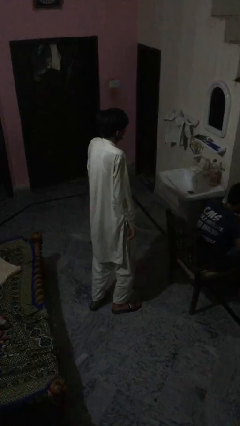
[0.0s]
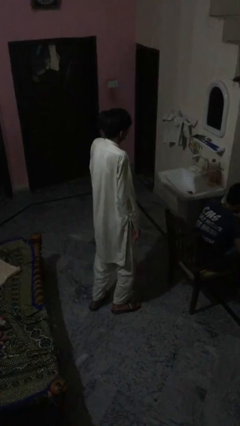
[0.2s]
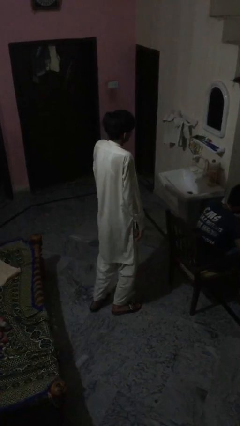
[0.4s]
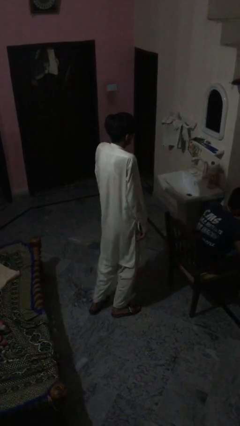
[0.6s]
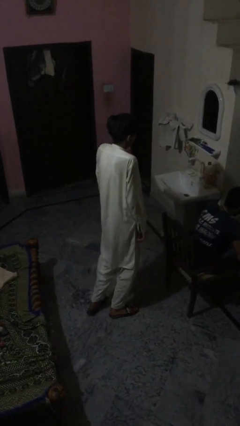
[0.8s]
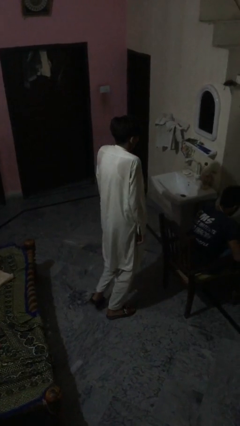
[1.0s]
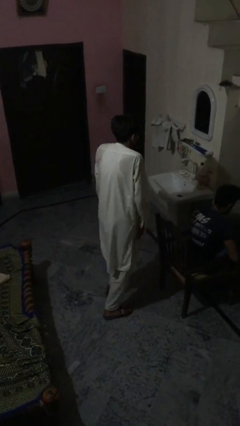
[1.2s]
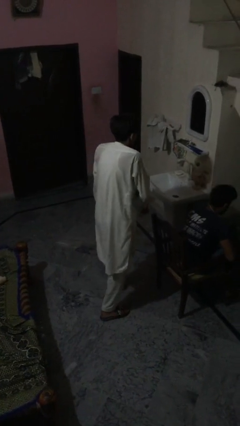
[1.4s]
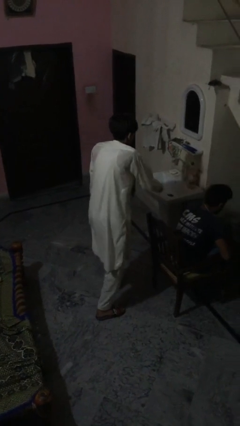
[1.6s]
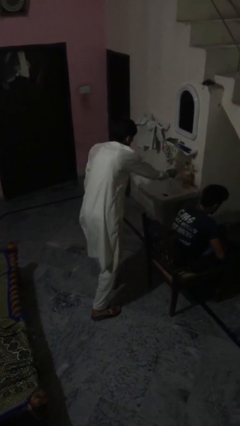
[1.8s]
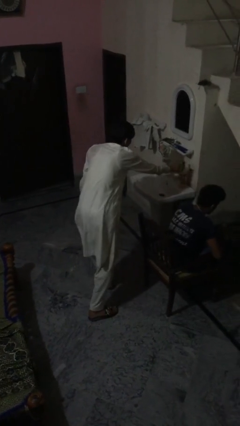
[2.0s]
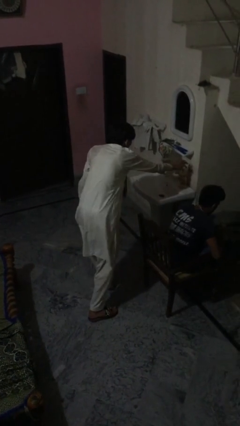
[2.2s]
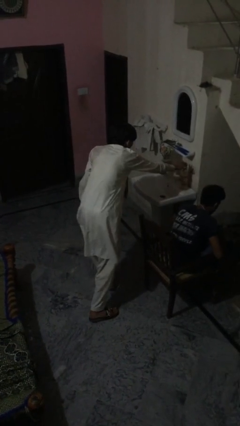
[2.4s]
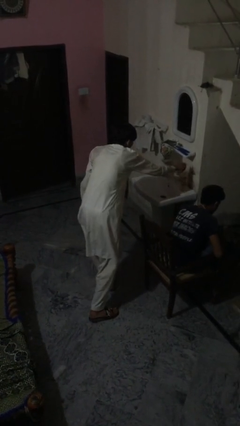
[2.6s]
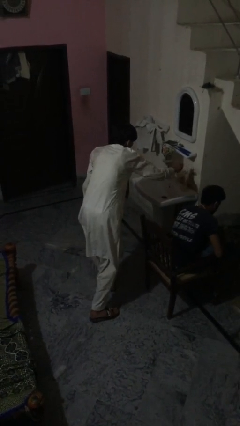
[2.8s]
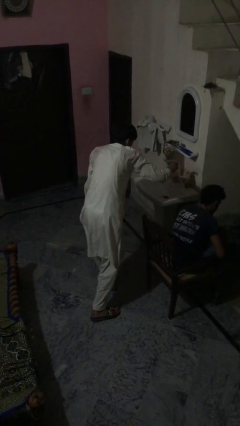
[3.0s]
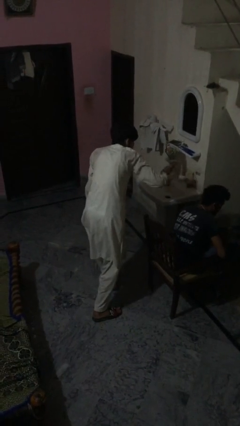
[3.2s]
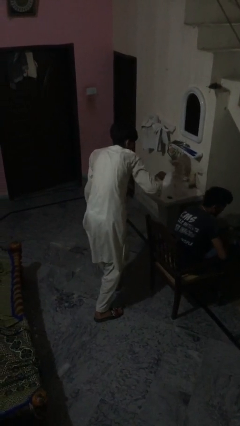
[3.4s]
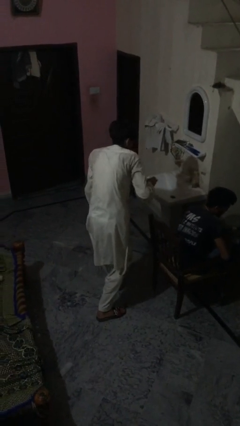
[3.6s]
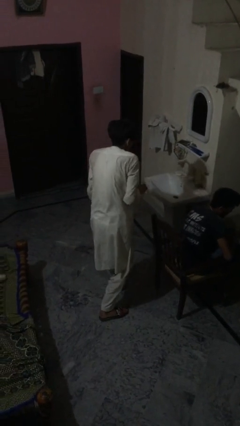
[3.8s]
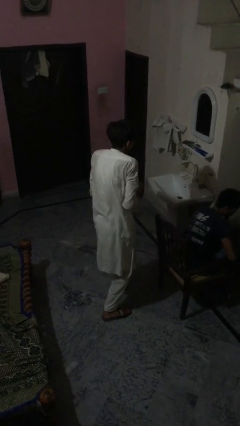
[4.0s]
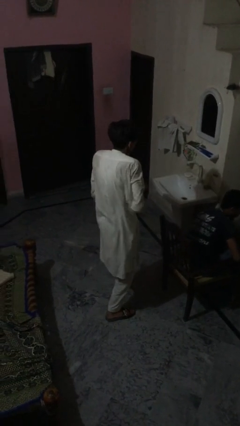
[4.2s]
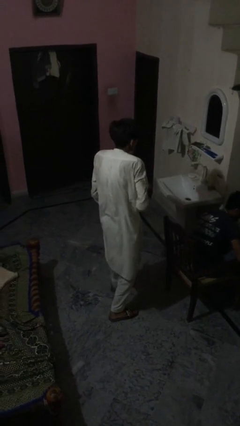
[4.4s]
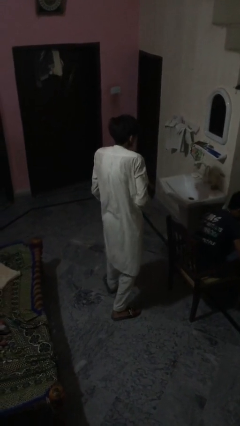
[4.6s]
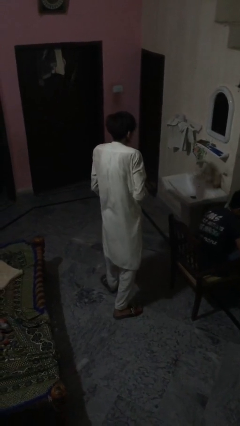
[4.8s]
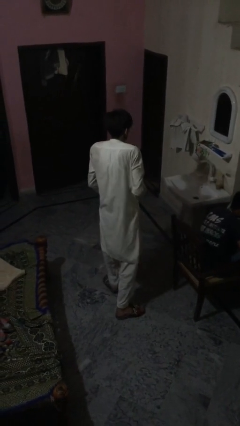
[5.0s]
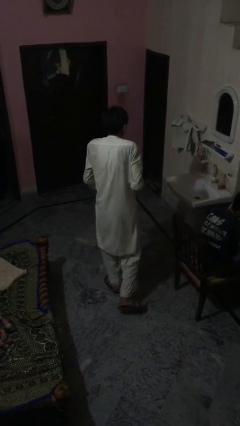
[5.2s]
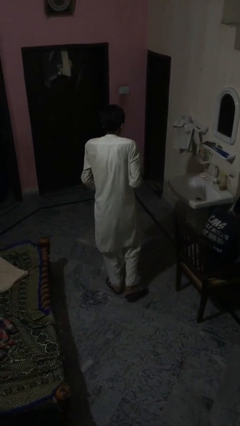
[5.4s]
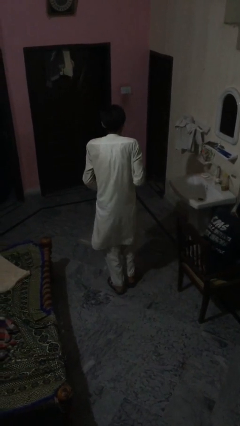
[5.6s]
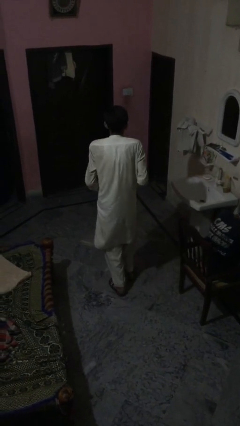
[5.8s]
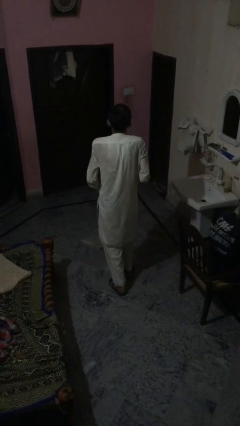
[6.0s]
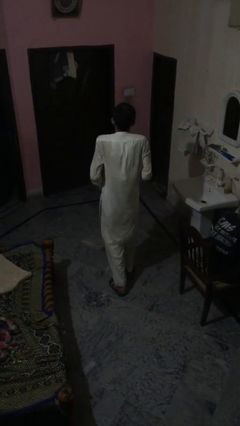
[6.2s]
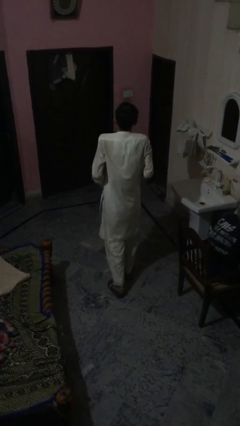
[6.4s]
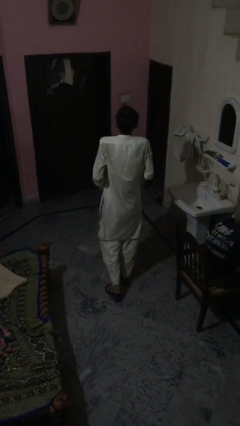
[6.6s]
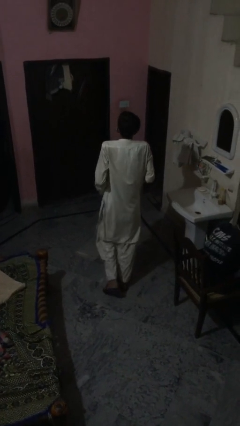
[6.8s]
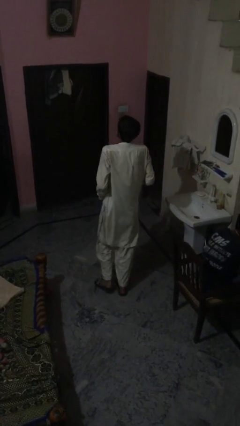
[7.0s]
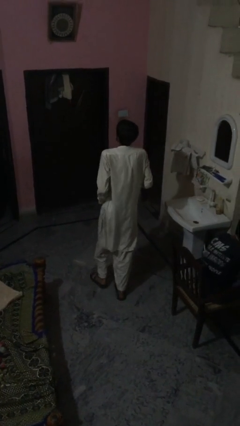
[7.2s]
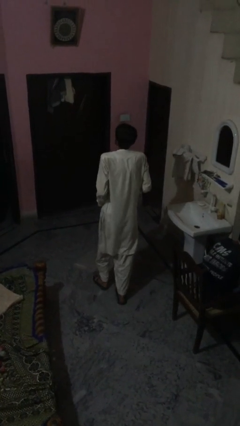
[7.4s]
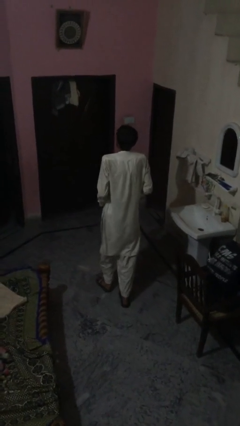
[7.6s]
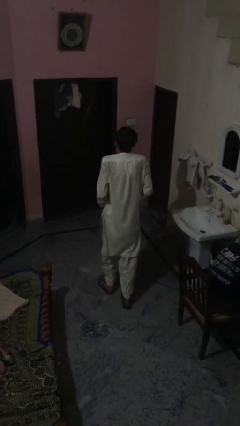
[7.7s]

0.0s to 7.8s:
person steals object from person

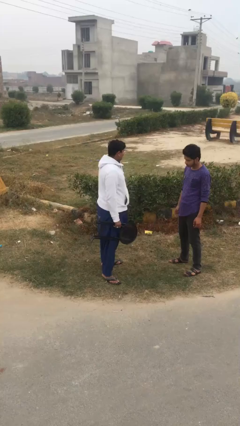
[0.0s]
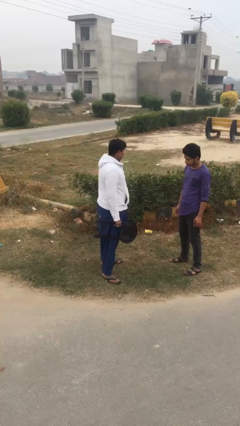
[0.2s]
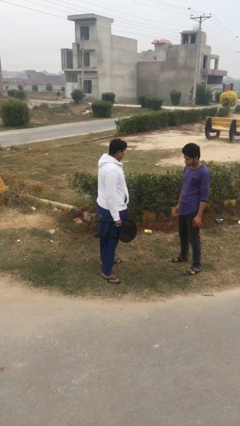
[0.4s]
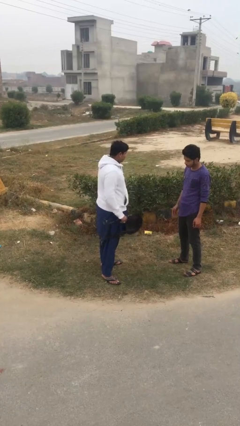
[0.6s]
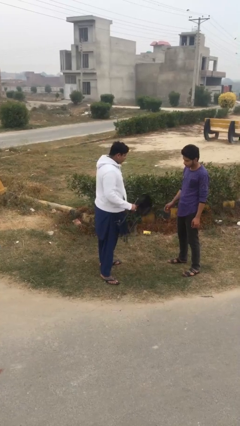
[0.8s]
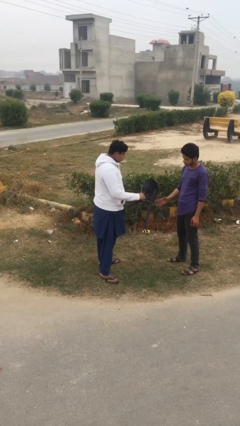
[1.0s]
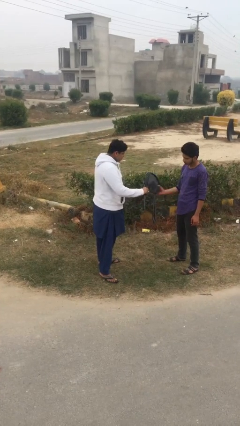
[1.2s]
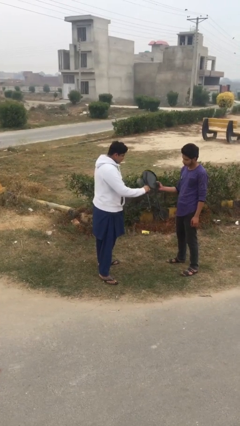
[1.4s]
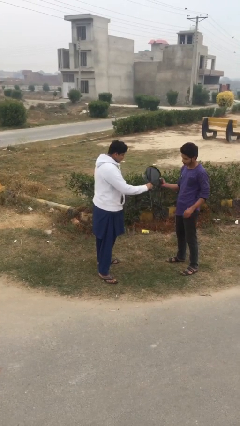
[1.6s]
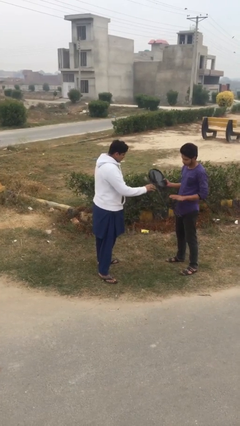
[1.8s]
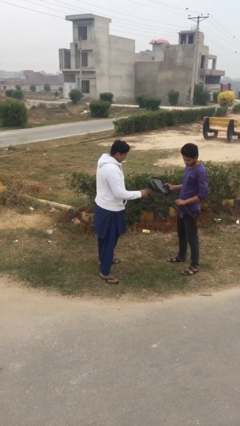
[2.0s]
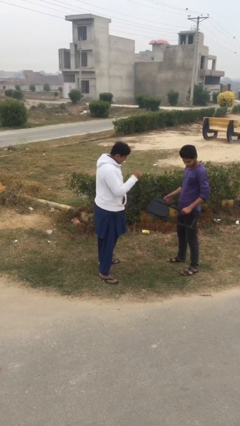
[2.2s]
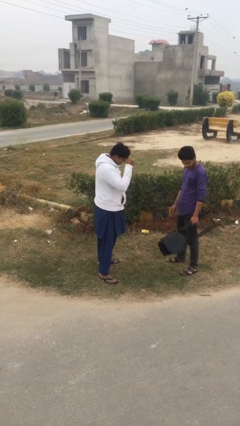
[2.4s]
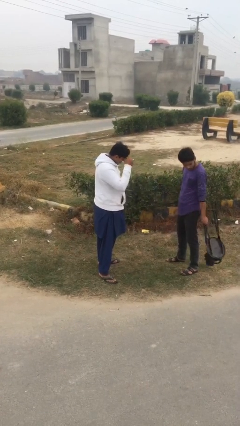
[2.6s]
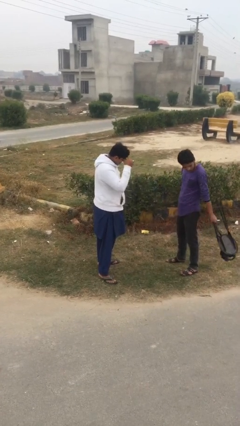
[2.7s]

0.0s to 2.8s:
person transfers object to person

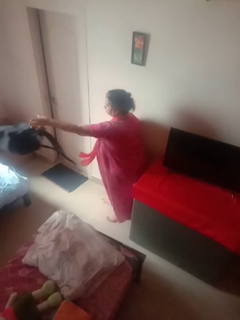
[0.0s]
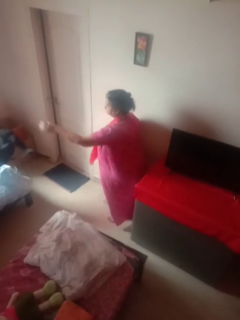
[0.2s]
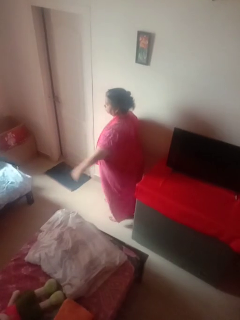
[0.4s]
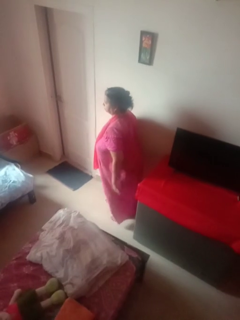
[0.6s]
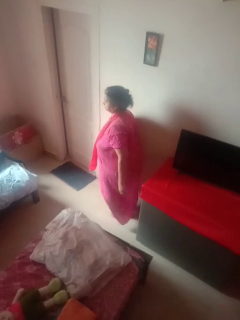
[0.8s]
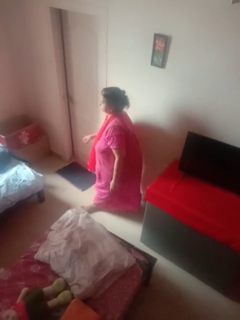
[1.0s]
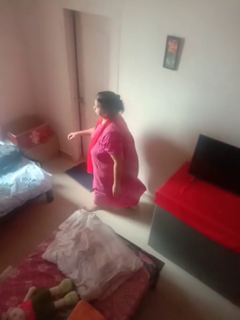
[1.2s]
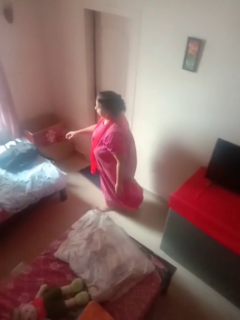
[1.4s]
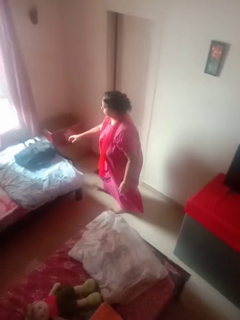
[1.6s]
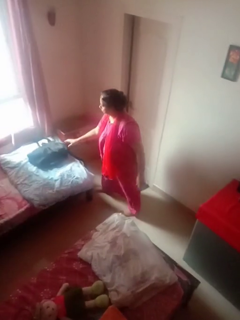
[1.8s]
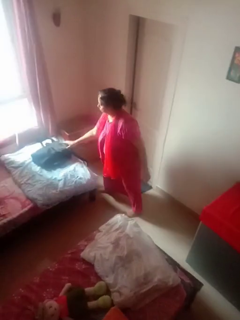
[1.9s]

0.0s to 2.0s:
person throws object on bed

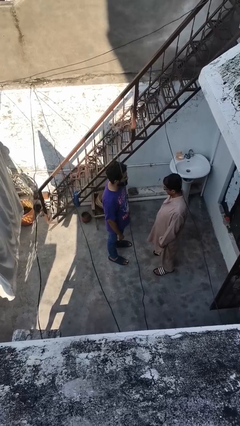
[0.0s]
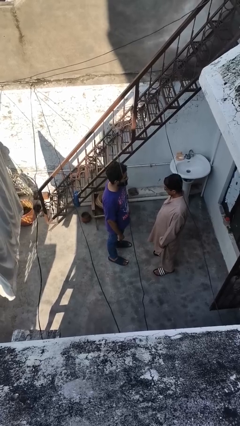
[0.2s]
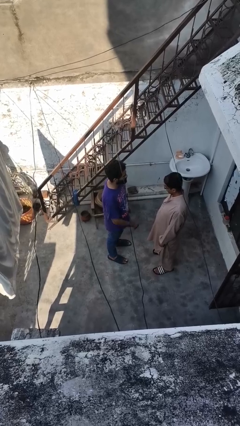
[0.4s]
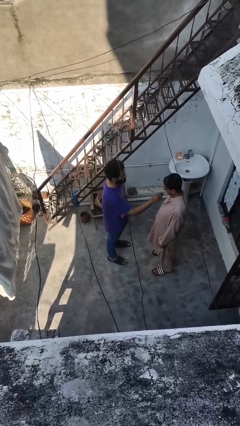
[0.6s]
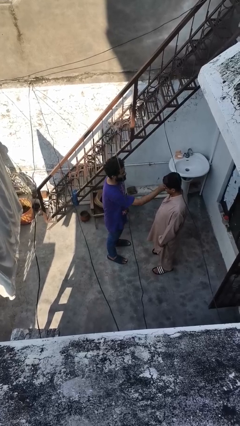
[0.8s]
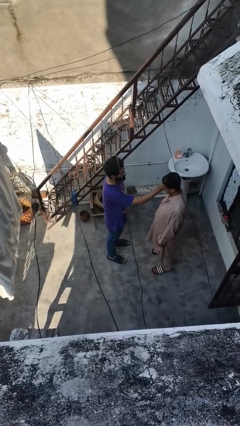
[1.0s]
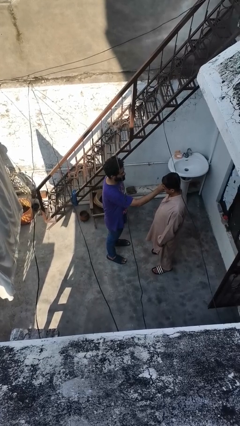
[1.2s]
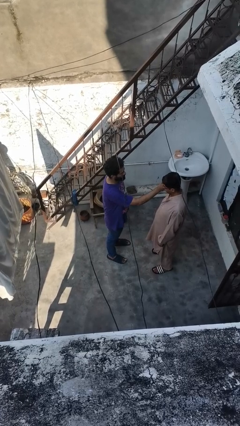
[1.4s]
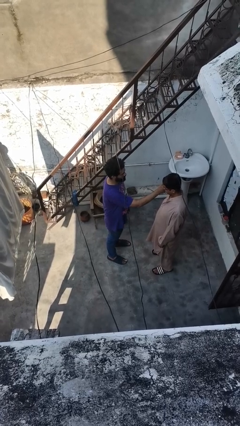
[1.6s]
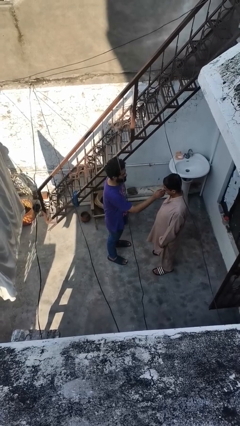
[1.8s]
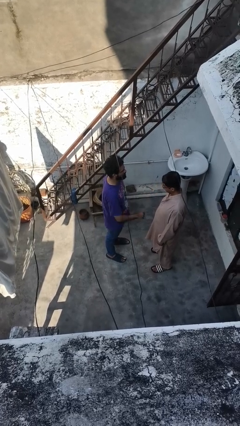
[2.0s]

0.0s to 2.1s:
person pounds shoulders of person

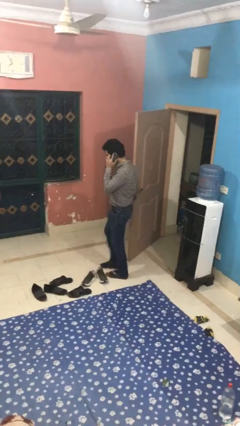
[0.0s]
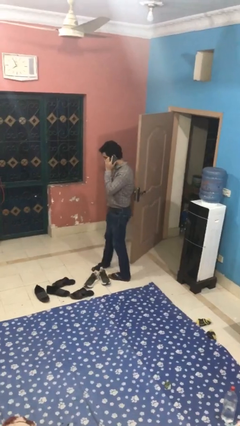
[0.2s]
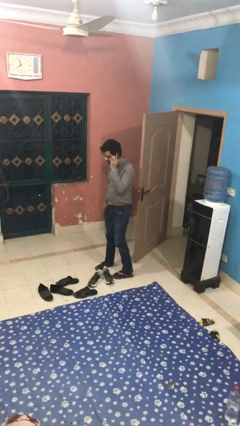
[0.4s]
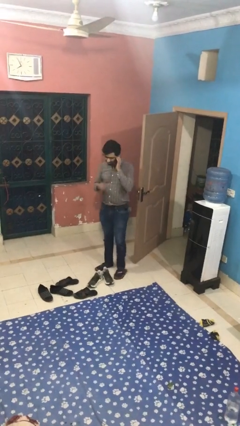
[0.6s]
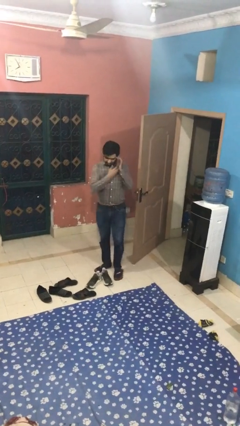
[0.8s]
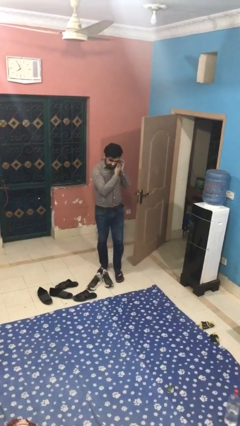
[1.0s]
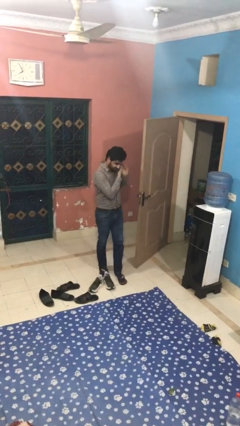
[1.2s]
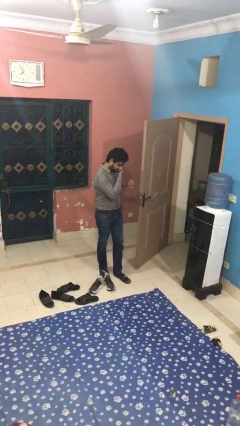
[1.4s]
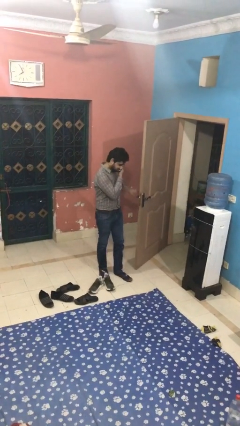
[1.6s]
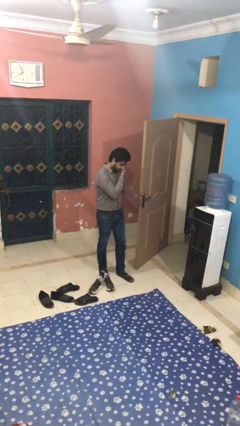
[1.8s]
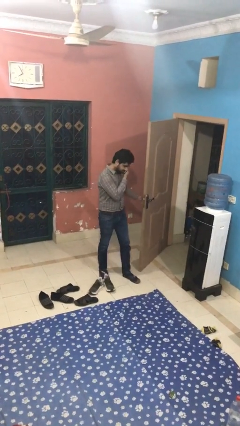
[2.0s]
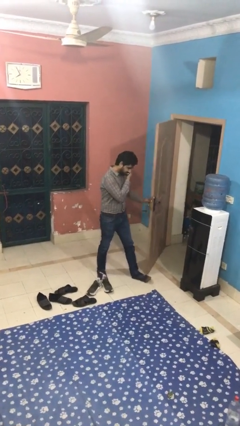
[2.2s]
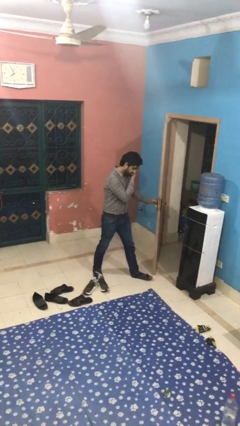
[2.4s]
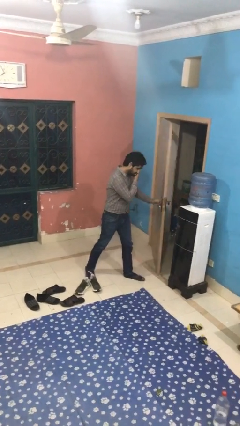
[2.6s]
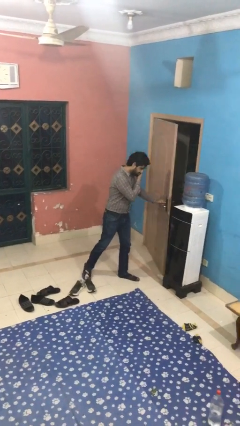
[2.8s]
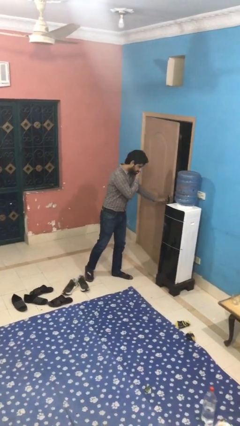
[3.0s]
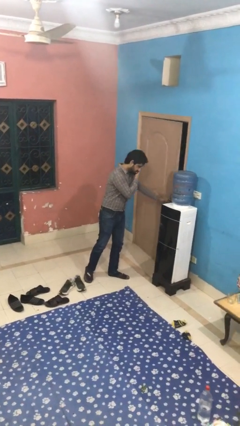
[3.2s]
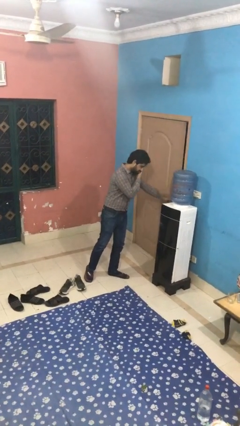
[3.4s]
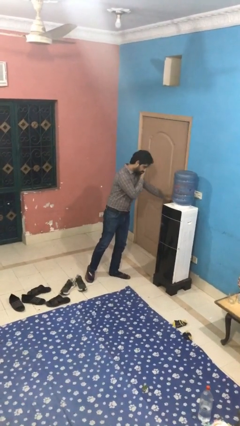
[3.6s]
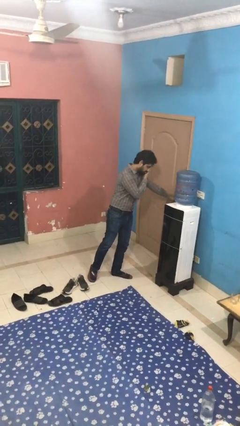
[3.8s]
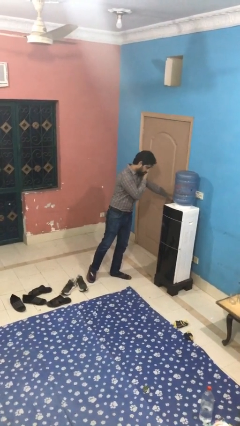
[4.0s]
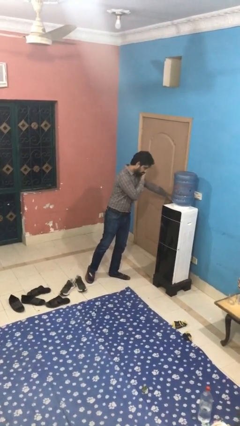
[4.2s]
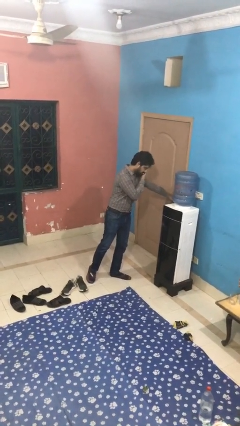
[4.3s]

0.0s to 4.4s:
person closes facility door
